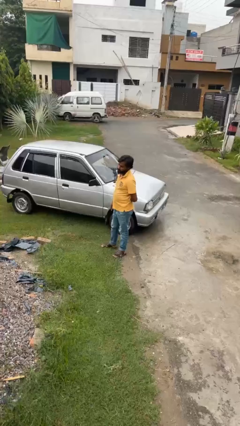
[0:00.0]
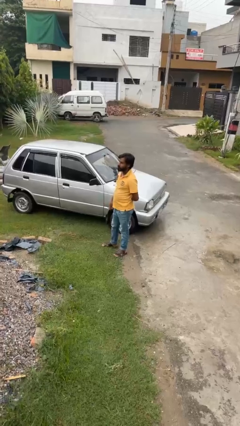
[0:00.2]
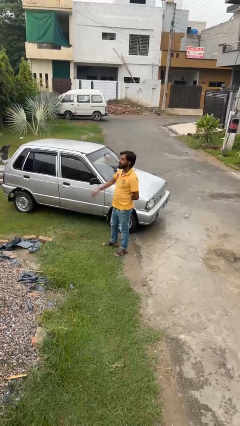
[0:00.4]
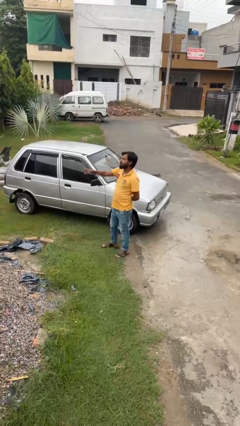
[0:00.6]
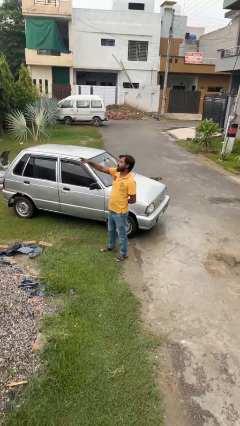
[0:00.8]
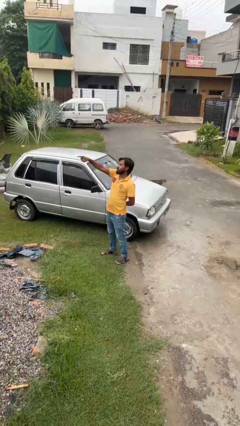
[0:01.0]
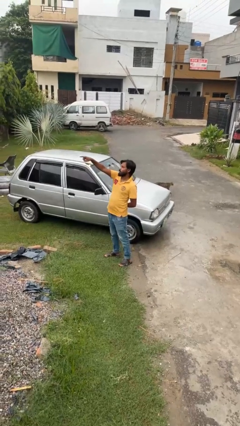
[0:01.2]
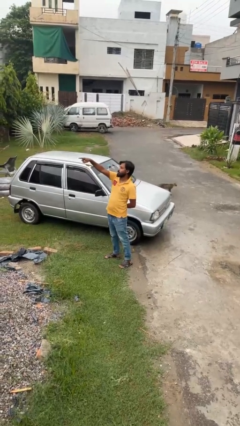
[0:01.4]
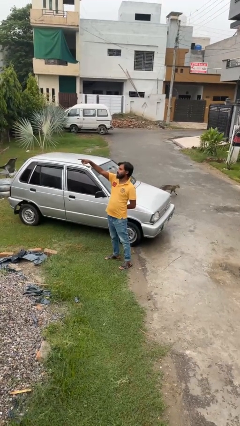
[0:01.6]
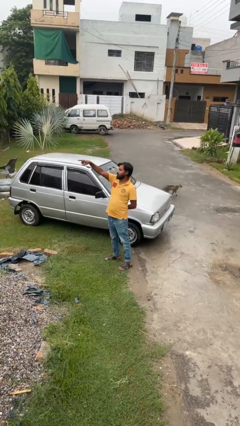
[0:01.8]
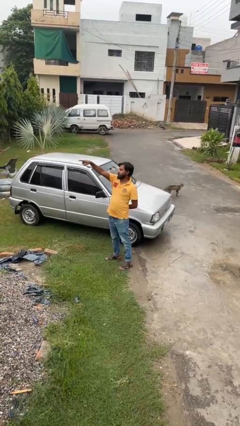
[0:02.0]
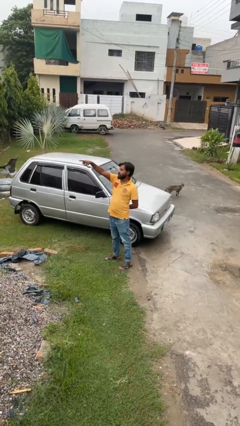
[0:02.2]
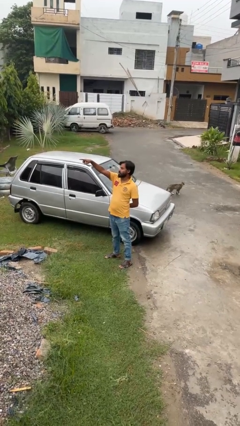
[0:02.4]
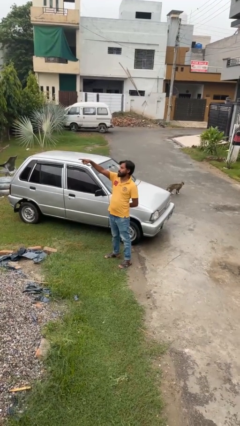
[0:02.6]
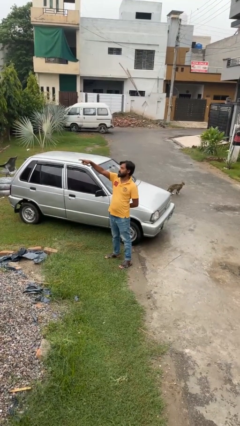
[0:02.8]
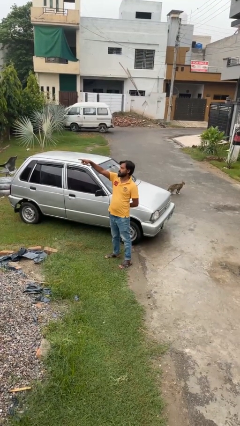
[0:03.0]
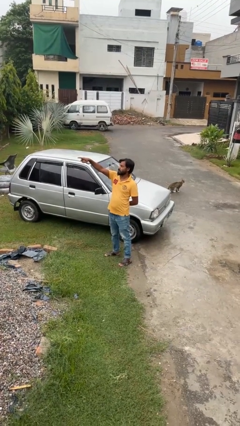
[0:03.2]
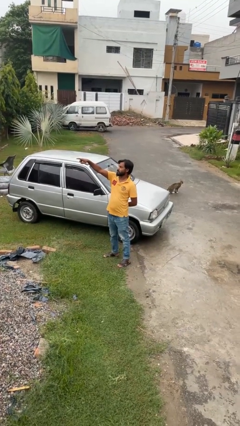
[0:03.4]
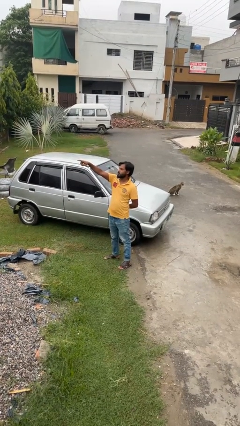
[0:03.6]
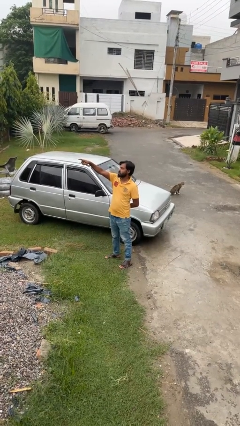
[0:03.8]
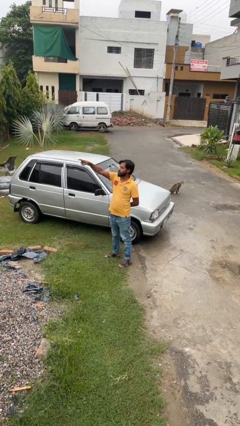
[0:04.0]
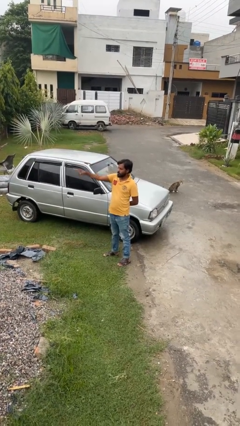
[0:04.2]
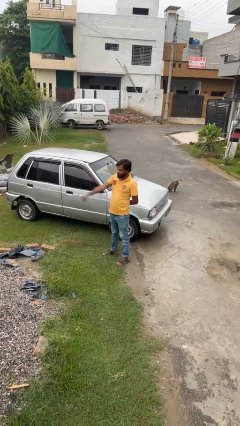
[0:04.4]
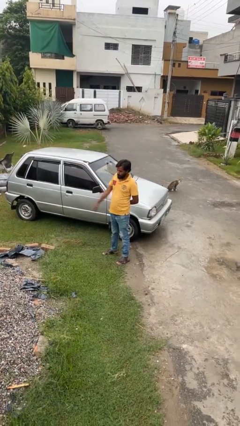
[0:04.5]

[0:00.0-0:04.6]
person points at person

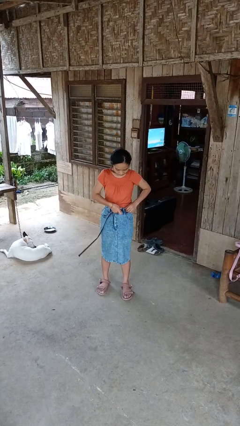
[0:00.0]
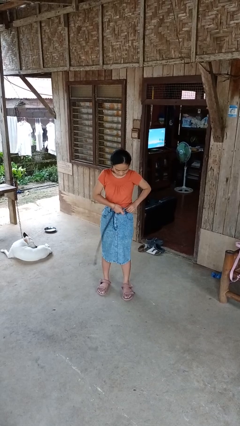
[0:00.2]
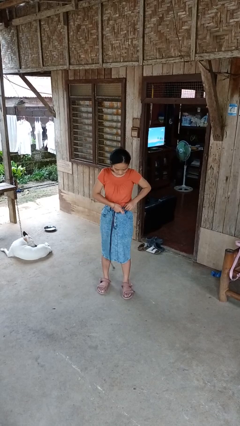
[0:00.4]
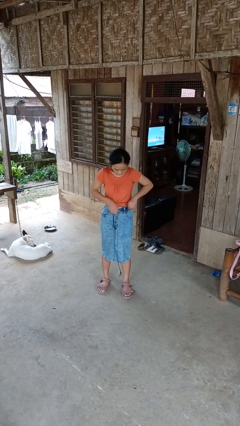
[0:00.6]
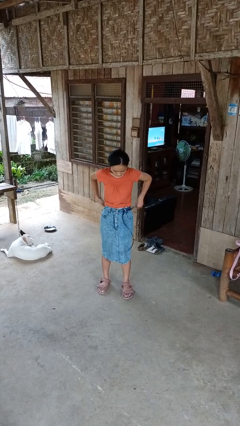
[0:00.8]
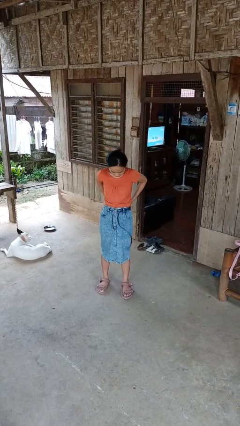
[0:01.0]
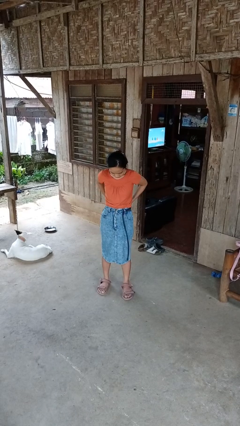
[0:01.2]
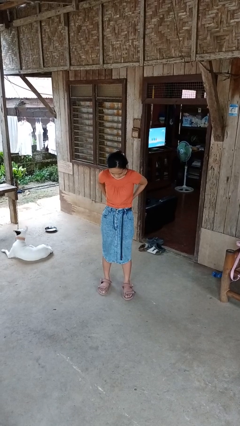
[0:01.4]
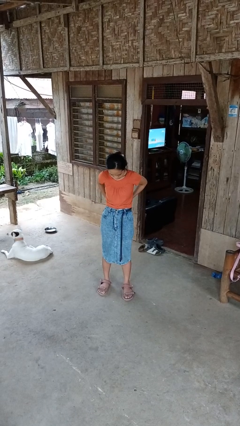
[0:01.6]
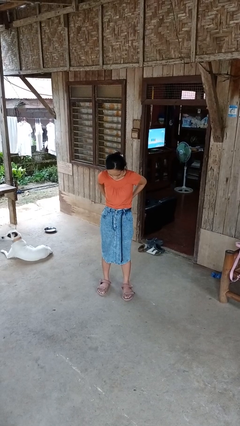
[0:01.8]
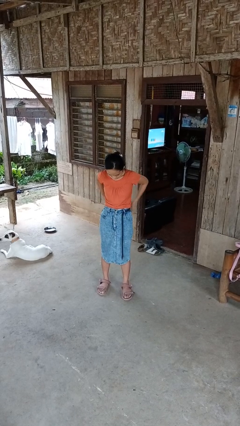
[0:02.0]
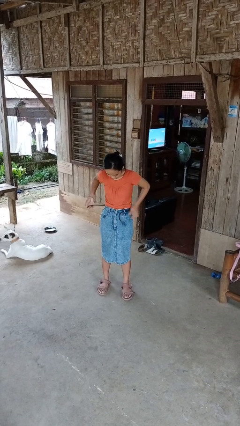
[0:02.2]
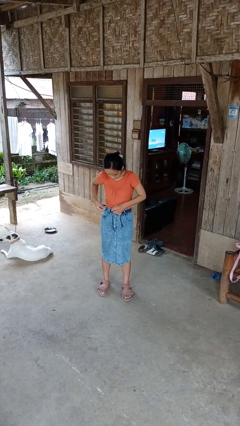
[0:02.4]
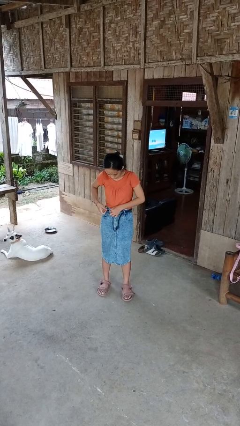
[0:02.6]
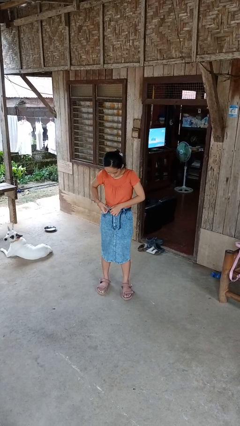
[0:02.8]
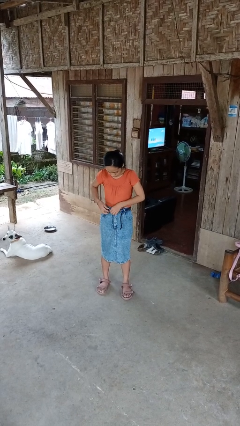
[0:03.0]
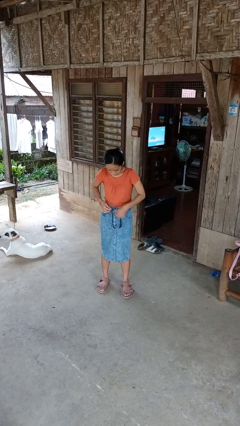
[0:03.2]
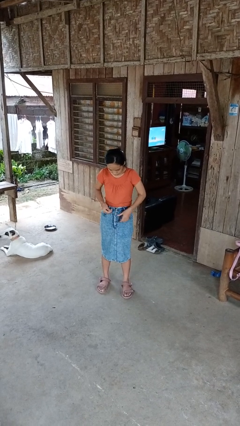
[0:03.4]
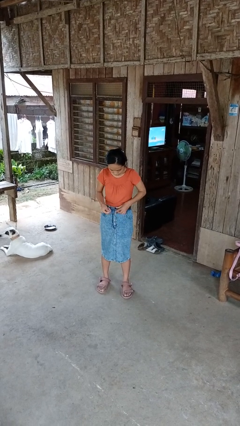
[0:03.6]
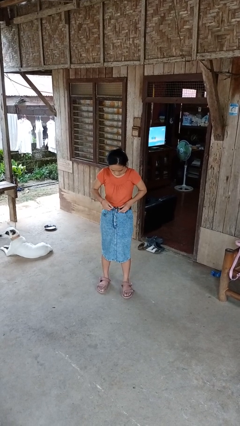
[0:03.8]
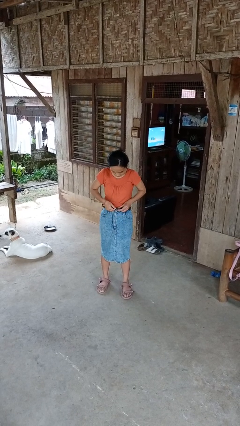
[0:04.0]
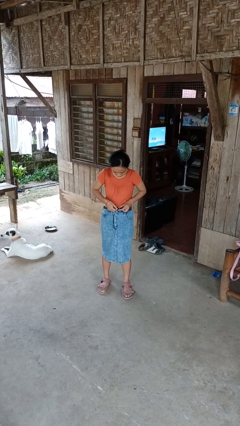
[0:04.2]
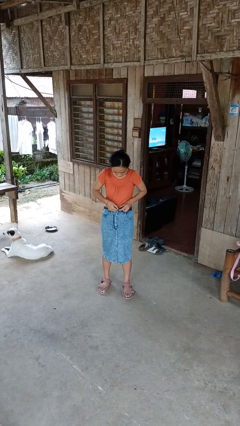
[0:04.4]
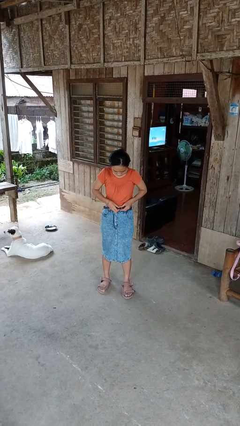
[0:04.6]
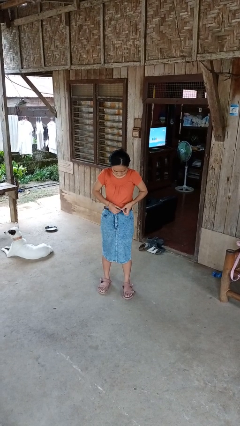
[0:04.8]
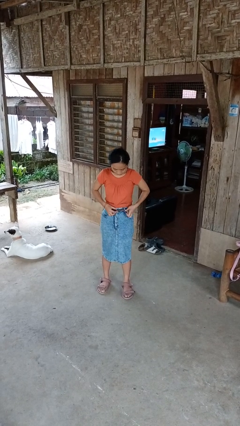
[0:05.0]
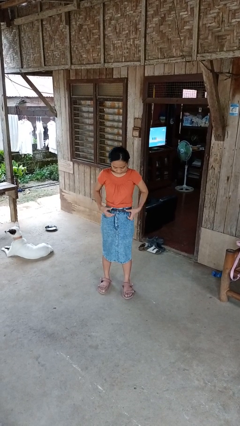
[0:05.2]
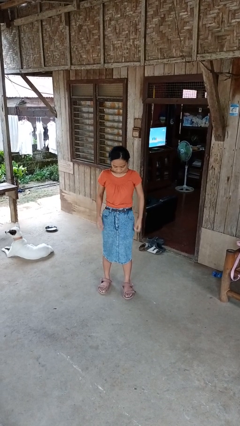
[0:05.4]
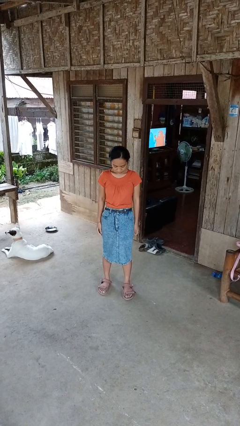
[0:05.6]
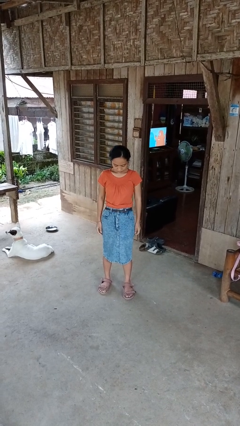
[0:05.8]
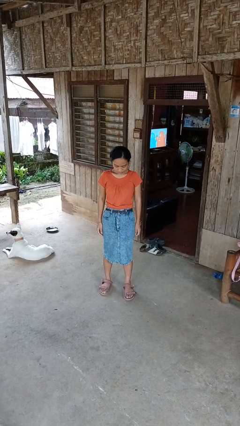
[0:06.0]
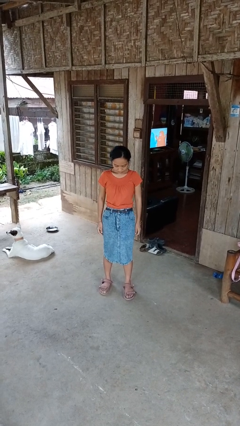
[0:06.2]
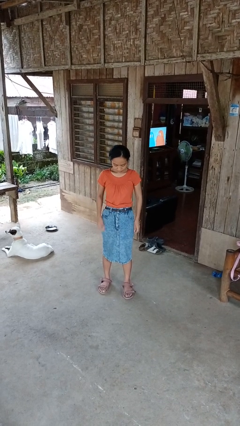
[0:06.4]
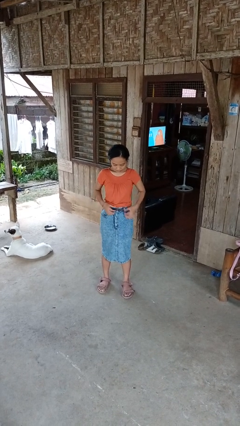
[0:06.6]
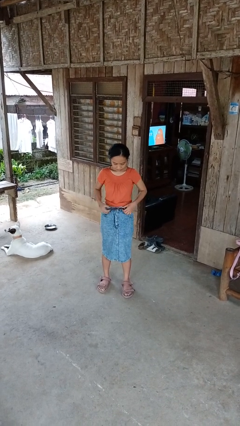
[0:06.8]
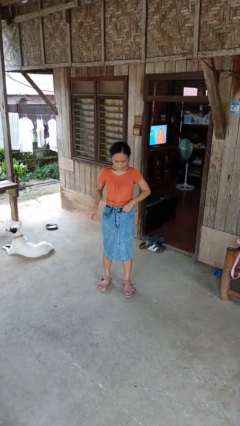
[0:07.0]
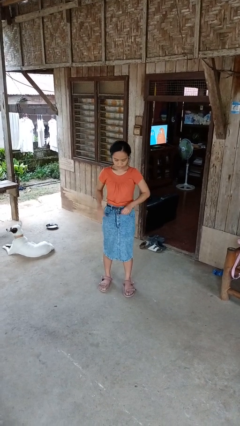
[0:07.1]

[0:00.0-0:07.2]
person puts on belt

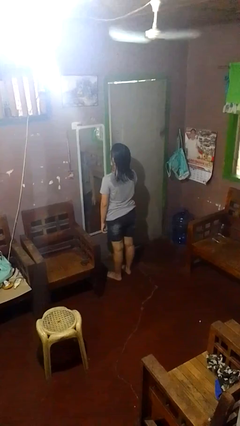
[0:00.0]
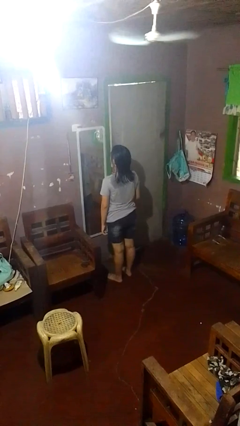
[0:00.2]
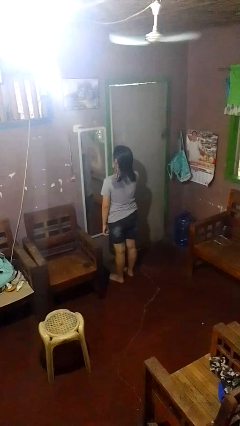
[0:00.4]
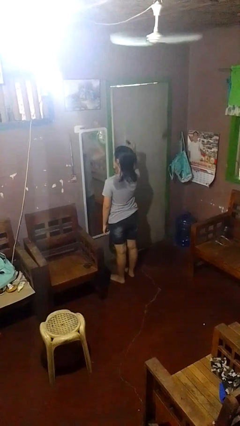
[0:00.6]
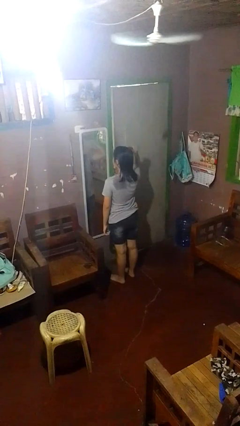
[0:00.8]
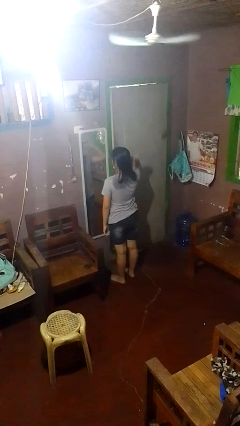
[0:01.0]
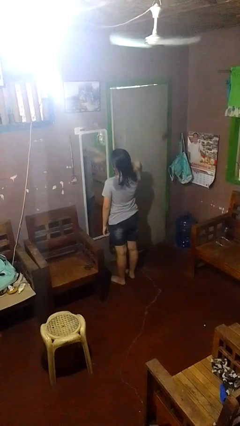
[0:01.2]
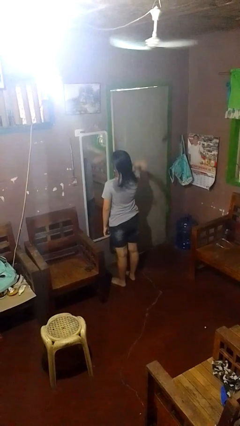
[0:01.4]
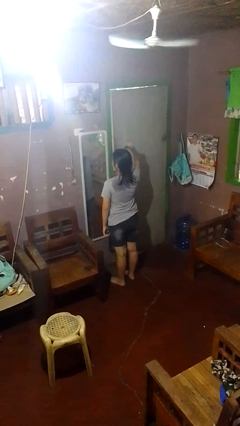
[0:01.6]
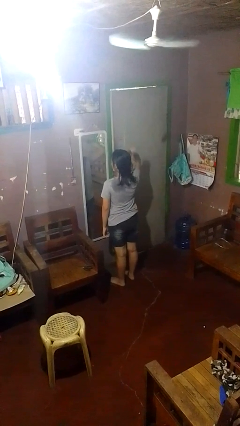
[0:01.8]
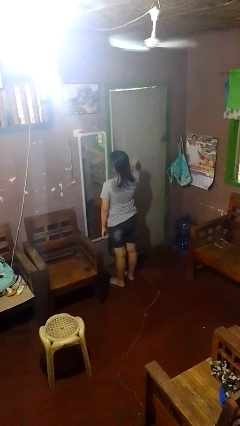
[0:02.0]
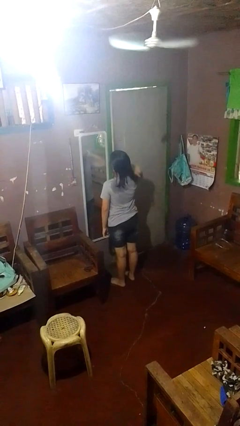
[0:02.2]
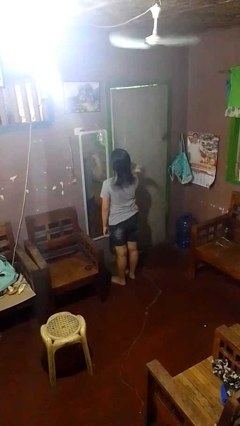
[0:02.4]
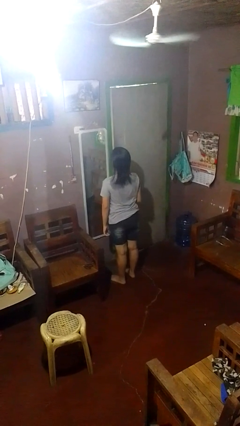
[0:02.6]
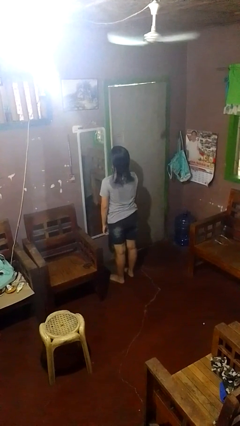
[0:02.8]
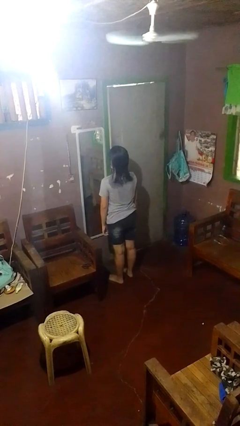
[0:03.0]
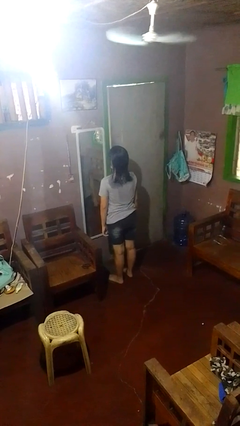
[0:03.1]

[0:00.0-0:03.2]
person brushes hair

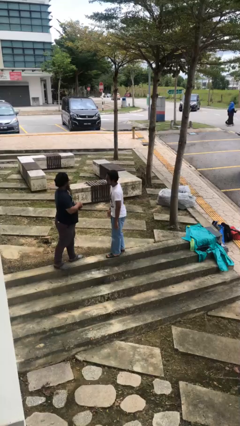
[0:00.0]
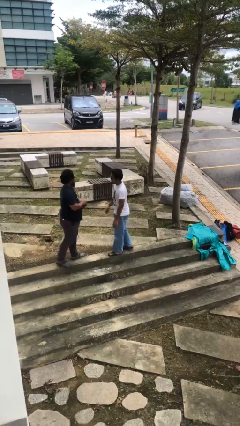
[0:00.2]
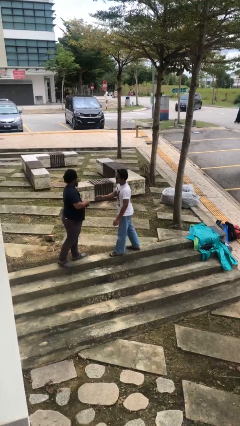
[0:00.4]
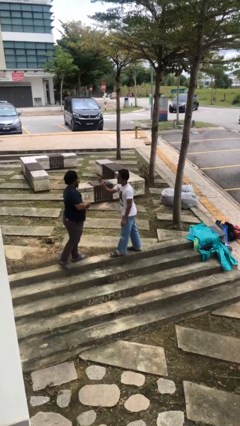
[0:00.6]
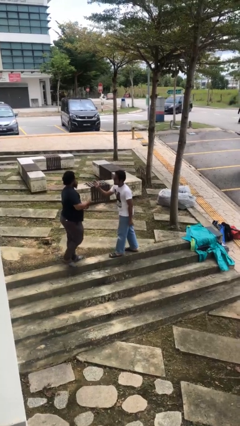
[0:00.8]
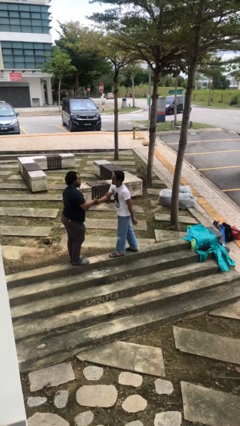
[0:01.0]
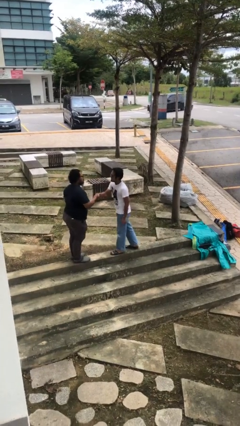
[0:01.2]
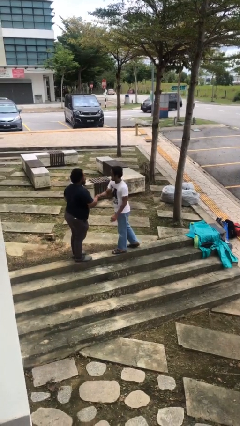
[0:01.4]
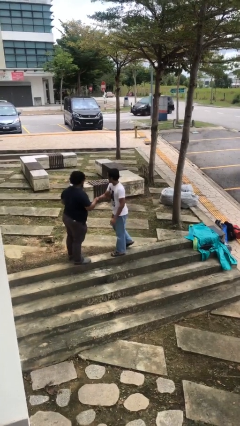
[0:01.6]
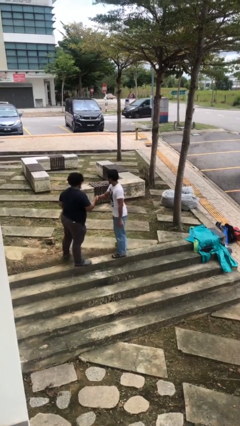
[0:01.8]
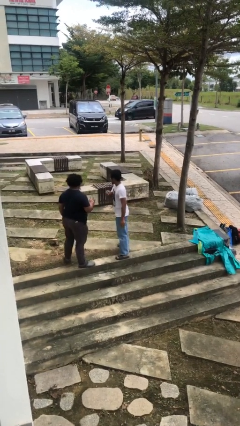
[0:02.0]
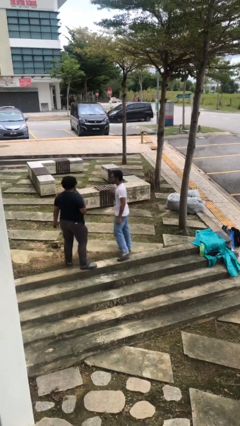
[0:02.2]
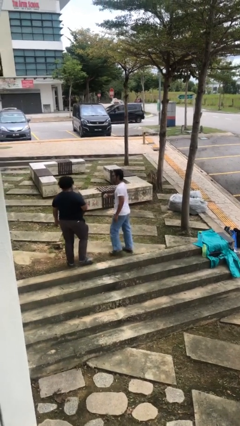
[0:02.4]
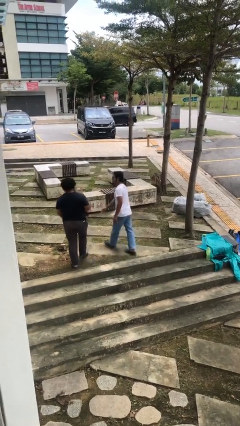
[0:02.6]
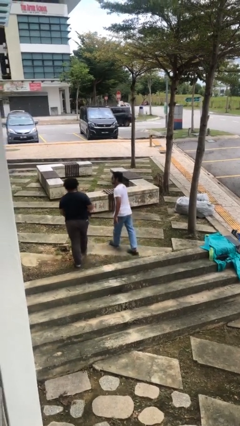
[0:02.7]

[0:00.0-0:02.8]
person shakes hand
